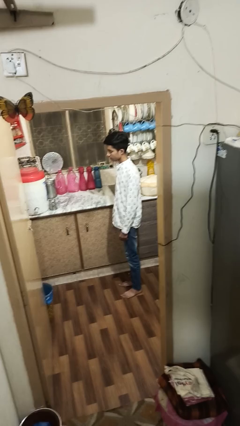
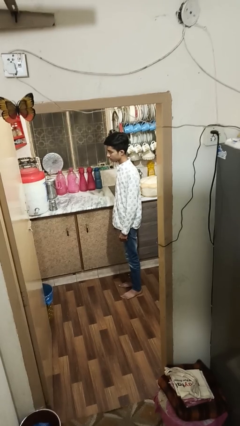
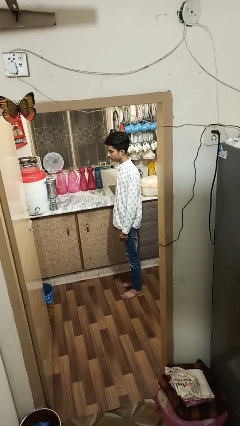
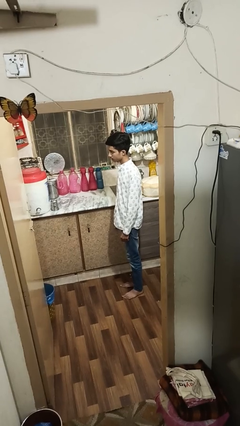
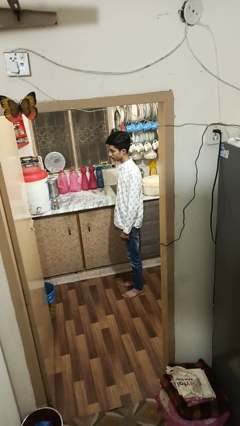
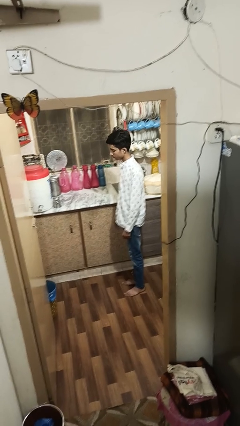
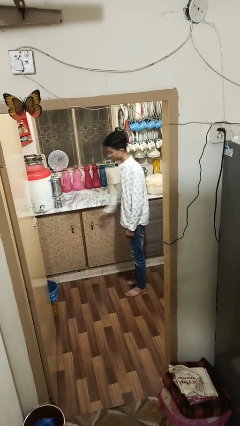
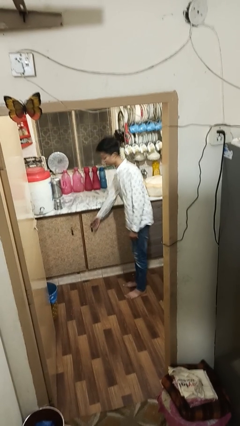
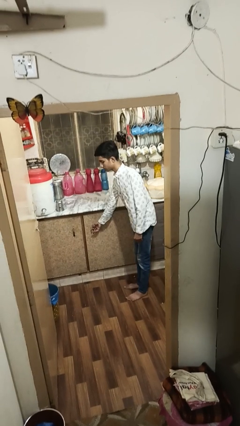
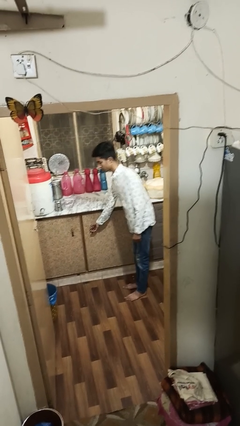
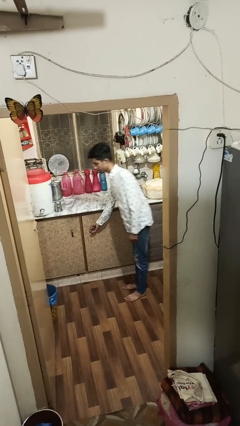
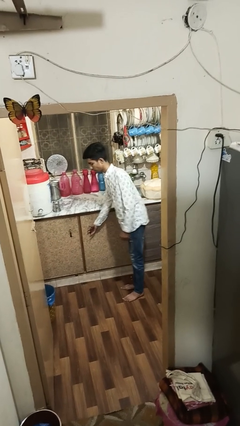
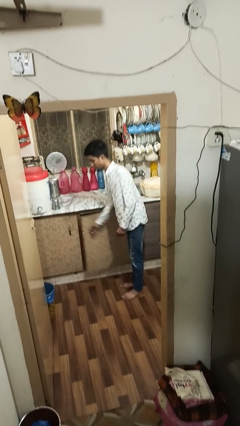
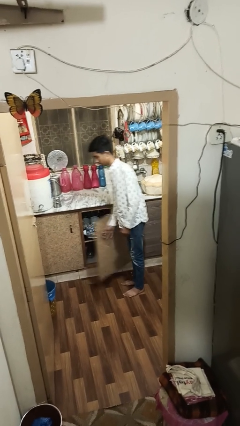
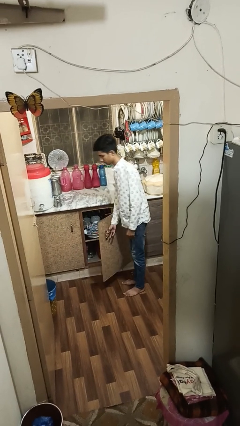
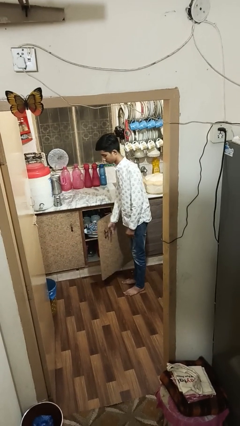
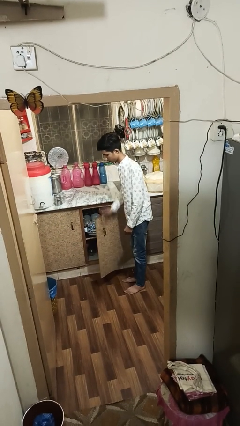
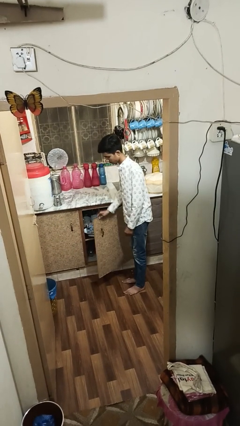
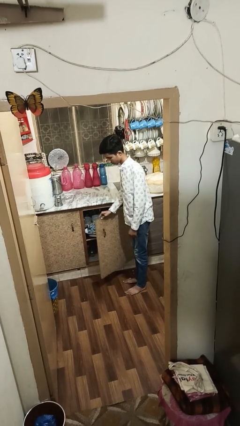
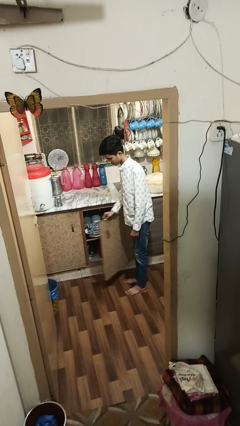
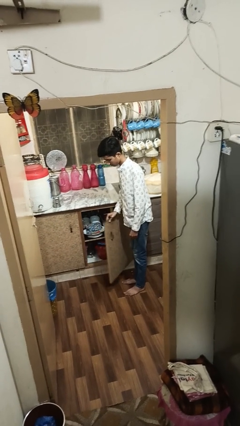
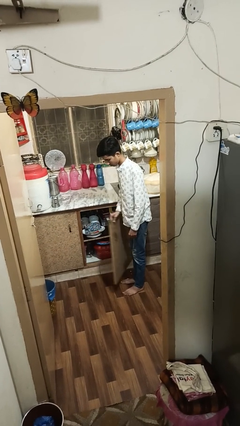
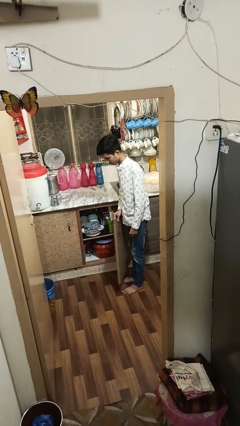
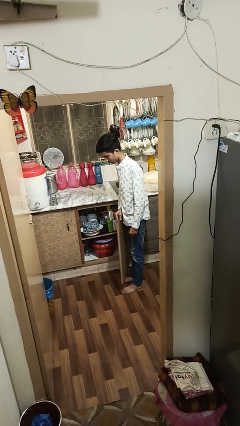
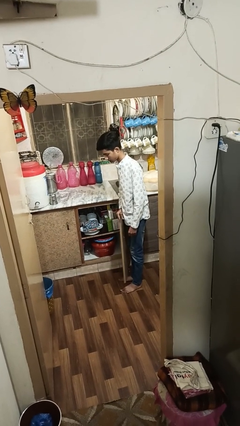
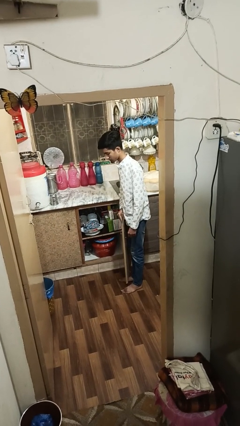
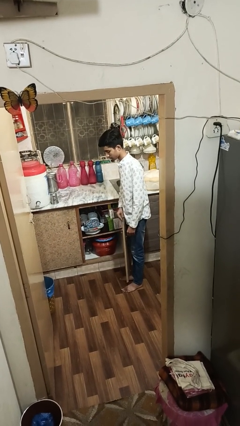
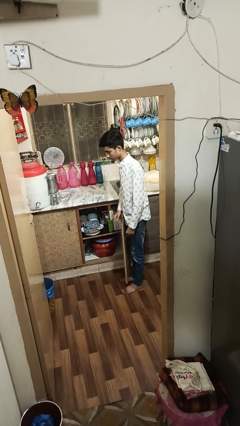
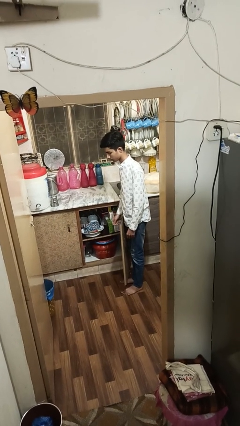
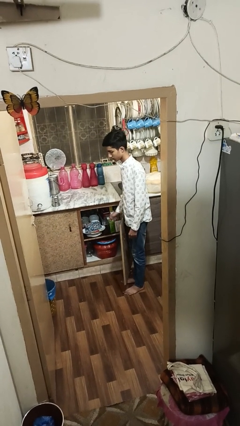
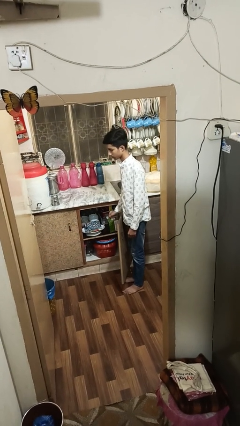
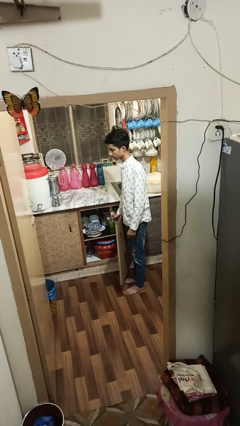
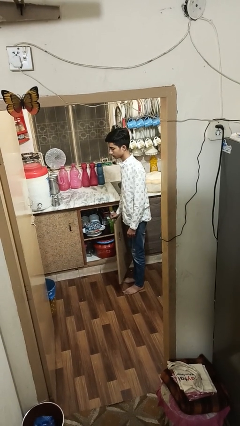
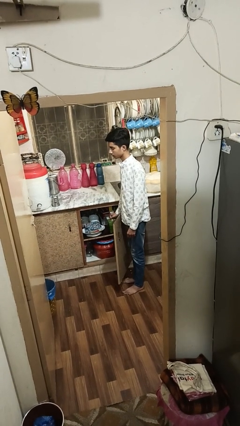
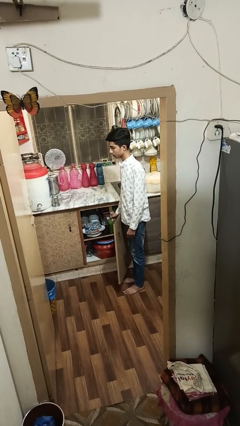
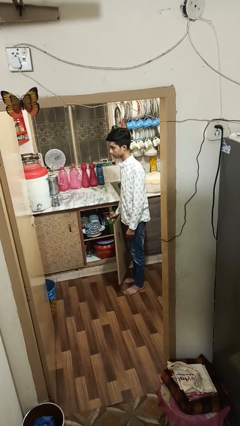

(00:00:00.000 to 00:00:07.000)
person opens cabinet

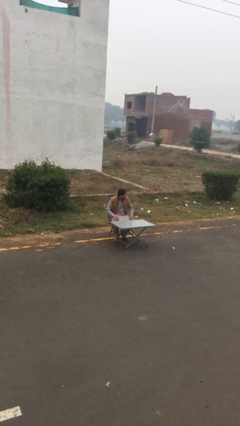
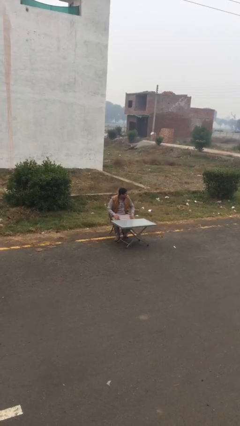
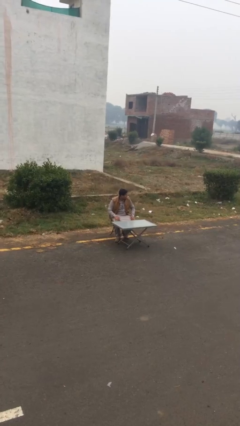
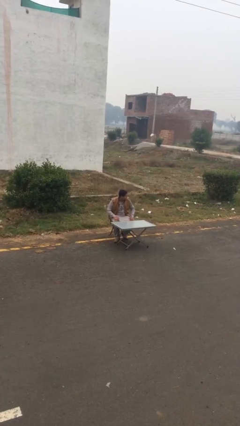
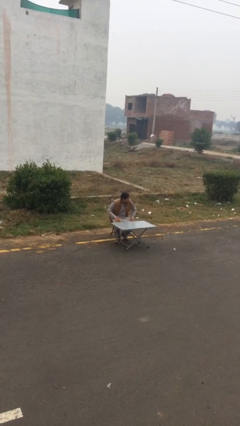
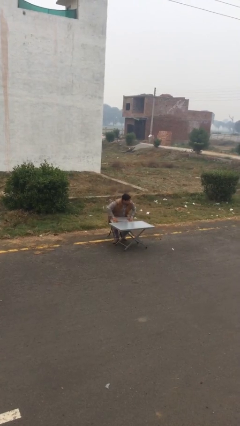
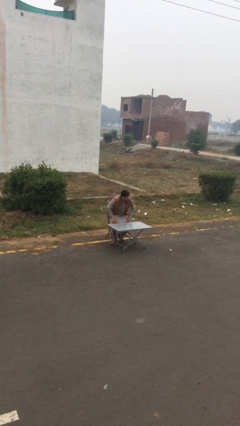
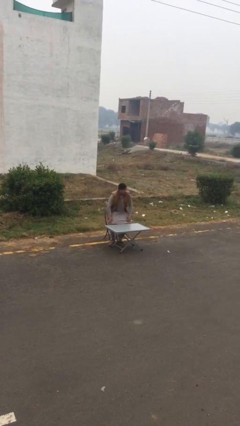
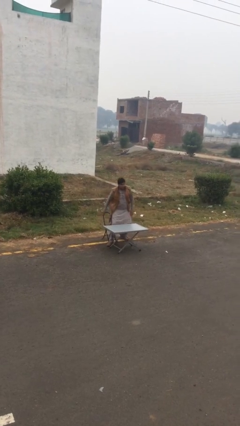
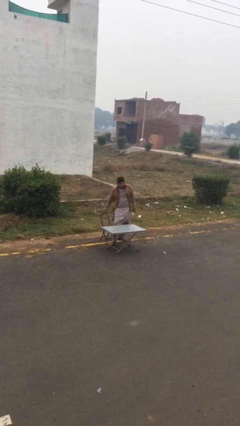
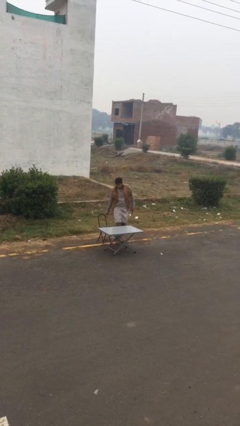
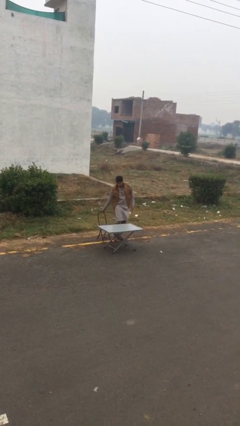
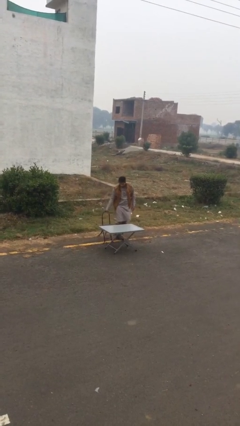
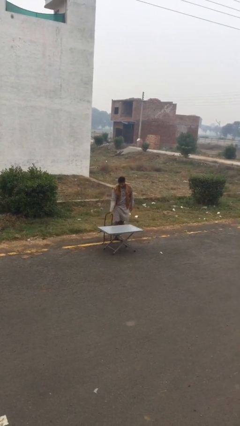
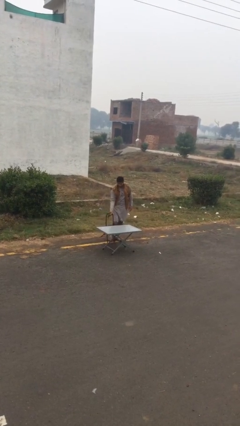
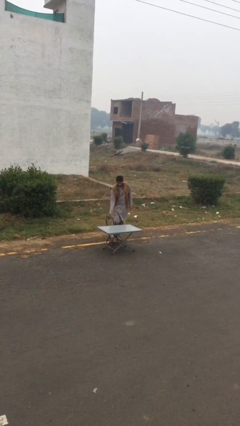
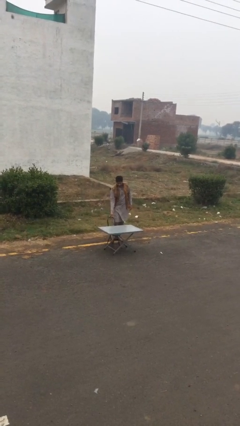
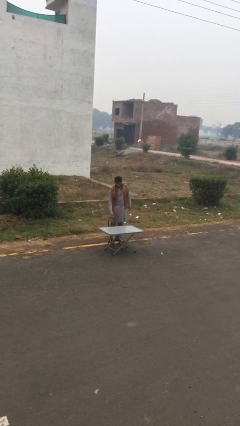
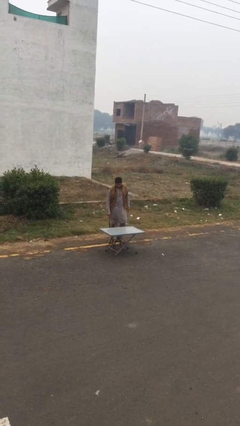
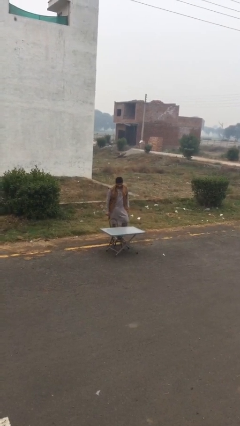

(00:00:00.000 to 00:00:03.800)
person stands up

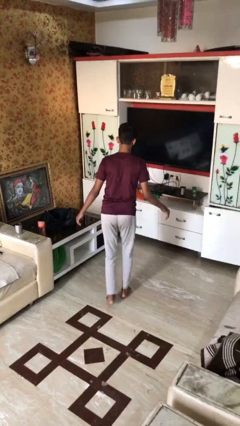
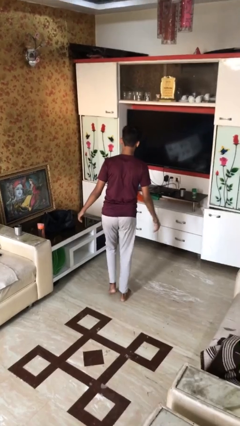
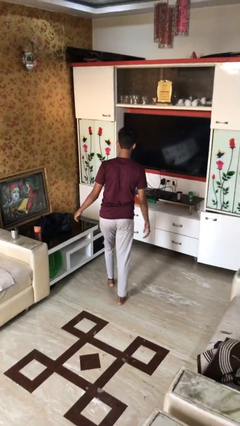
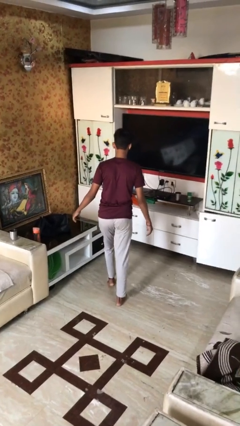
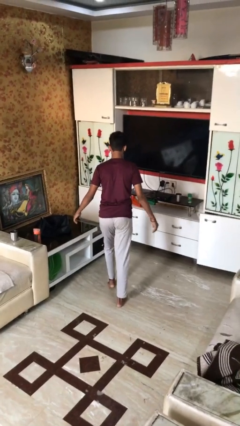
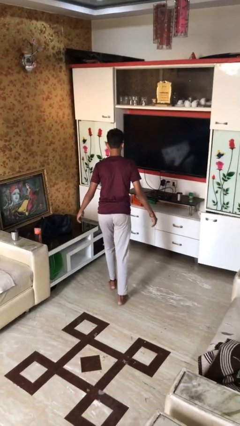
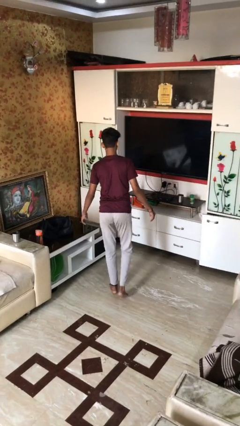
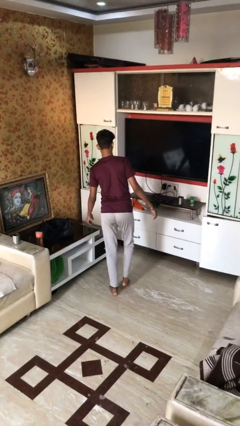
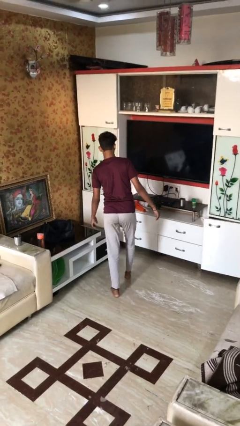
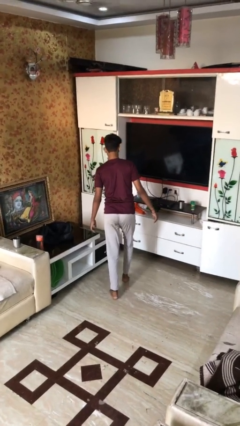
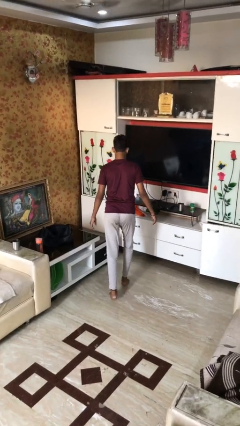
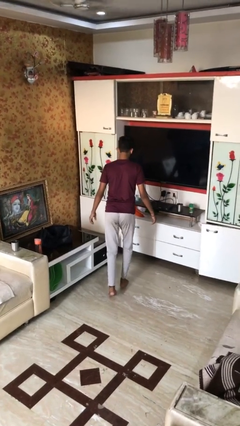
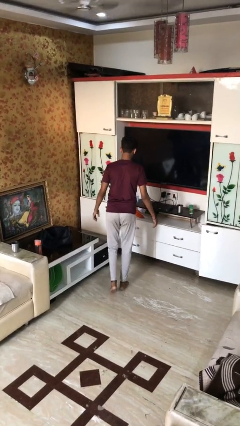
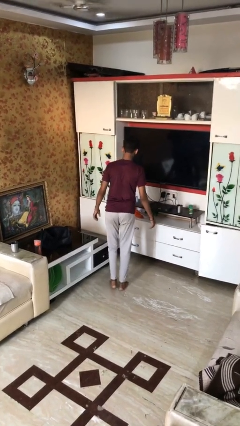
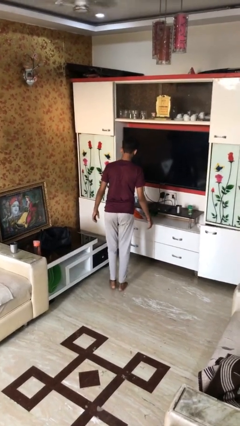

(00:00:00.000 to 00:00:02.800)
person walks tiptoe

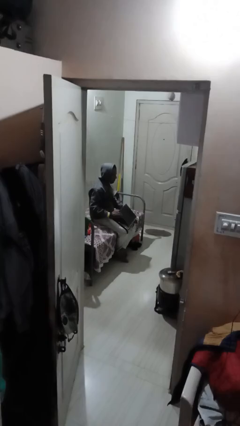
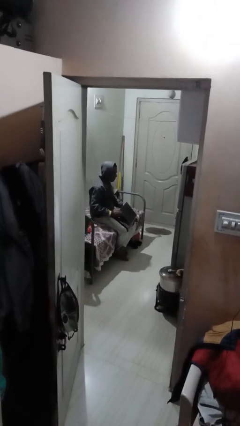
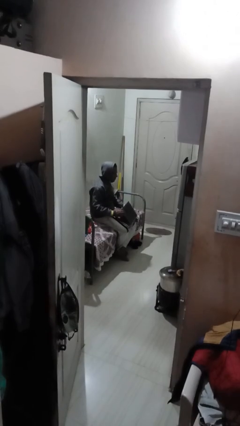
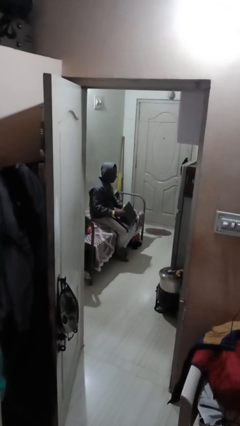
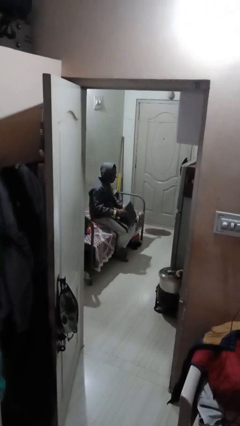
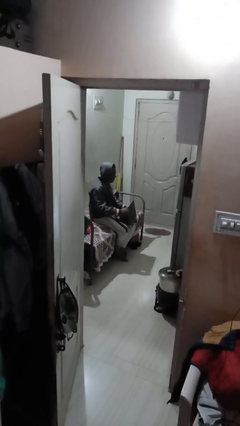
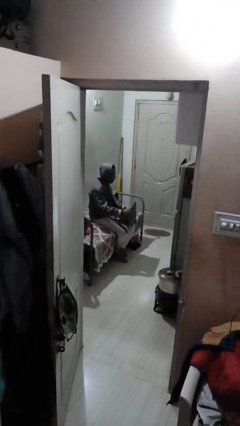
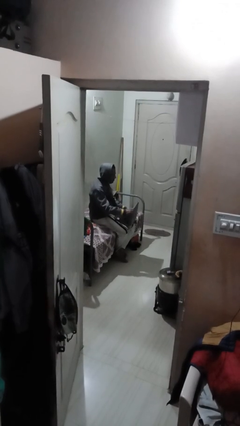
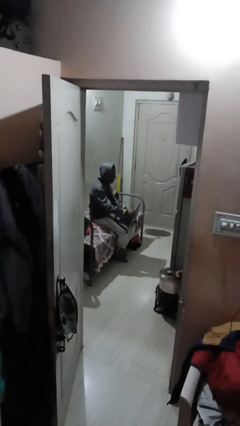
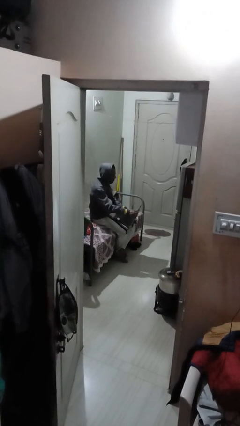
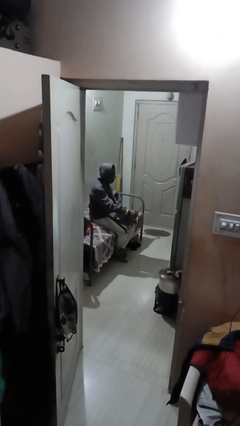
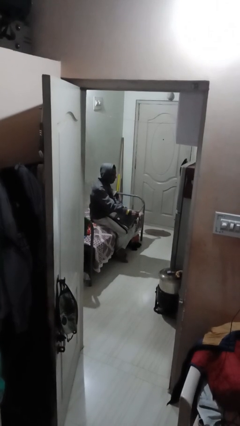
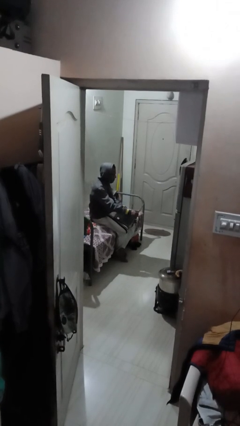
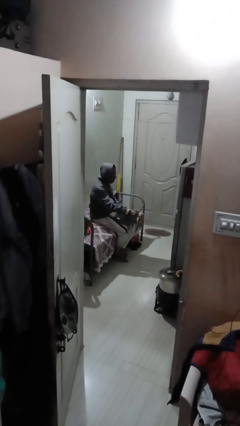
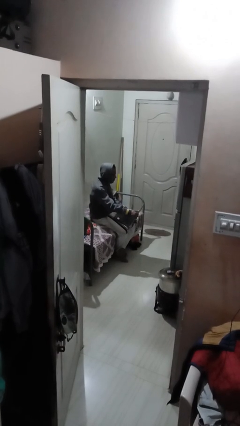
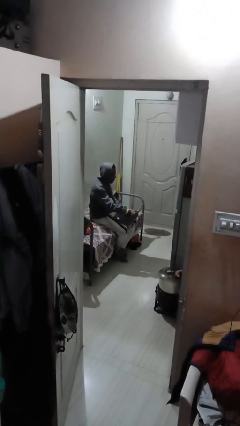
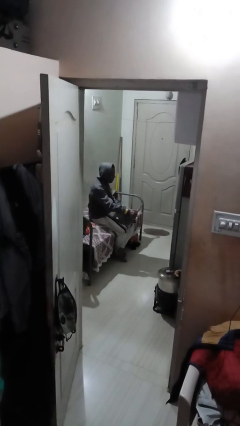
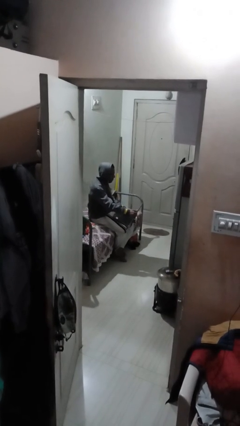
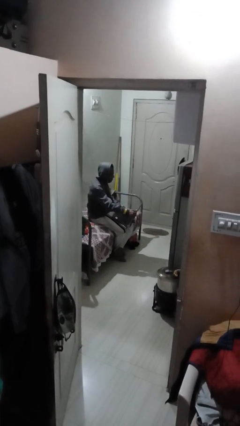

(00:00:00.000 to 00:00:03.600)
person interacts with laptop

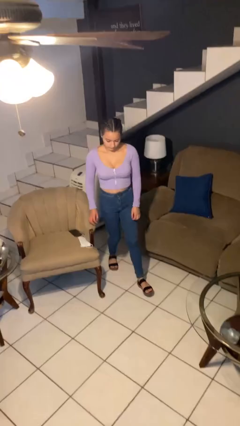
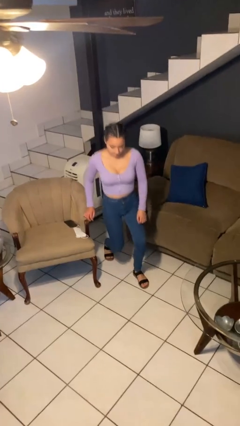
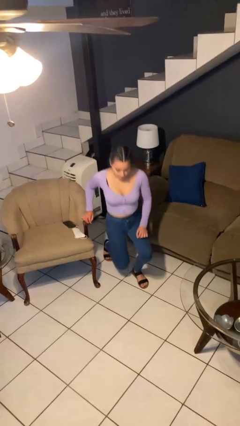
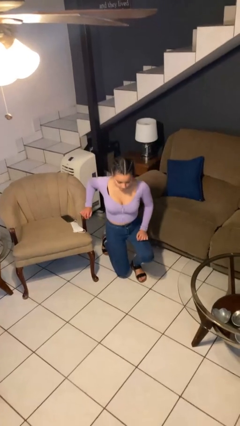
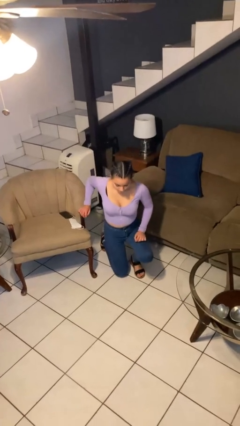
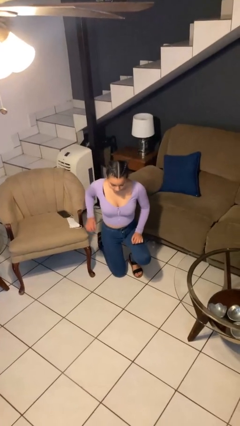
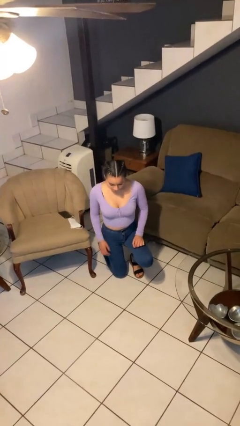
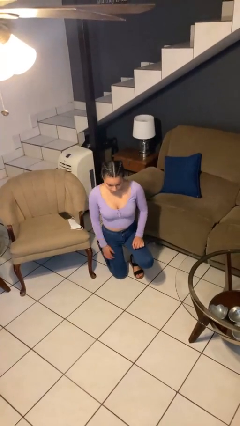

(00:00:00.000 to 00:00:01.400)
person kneels
